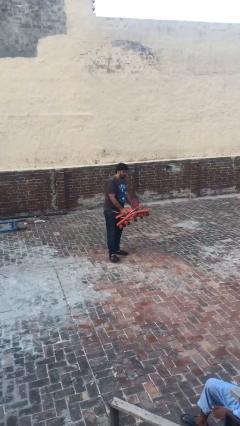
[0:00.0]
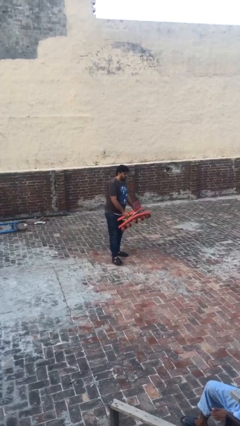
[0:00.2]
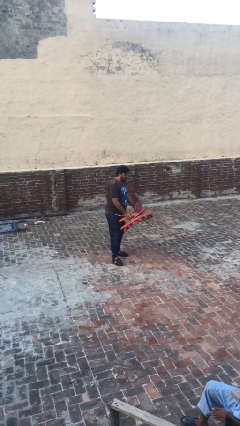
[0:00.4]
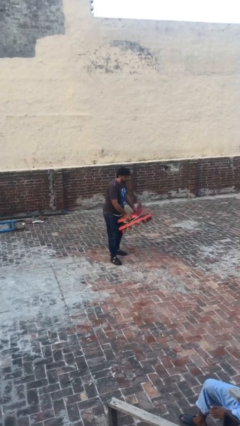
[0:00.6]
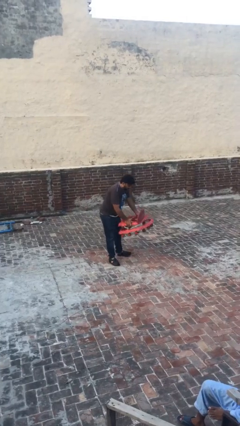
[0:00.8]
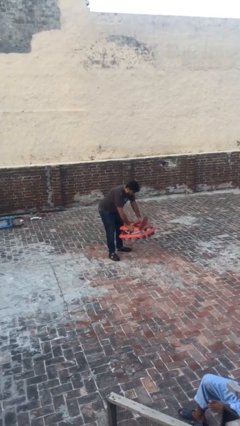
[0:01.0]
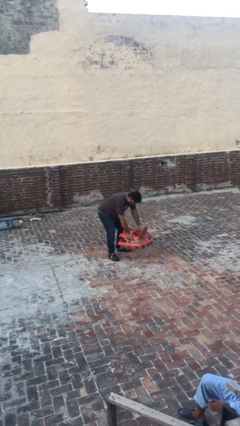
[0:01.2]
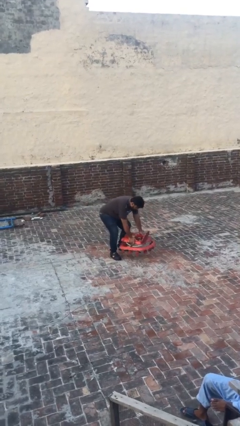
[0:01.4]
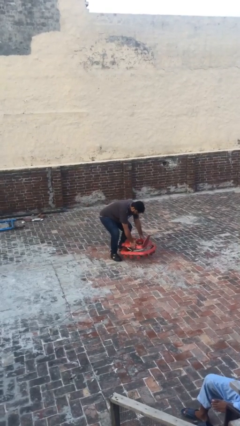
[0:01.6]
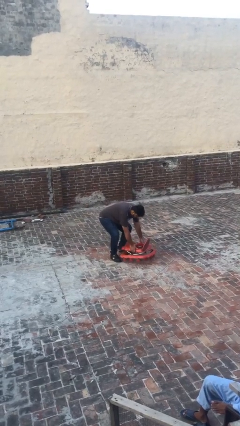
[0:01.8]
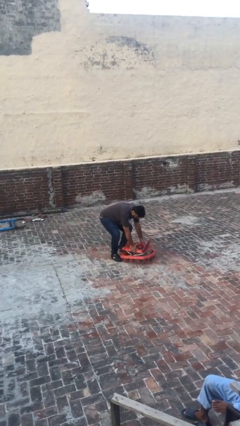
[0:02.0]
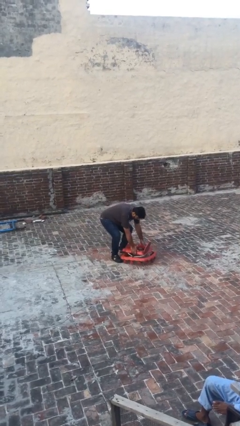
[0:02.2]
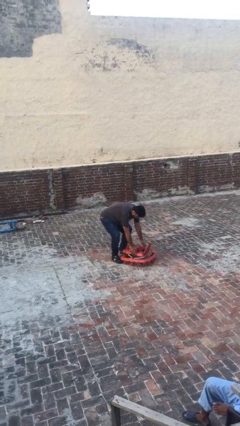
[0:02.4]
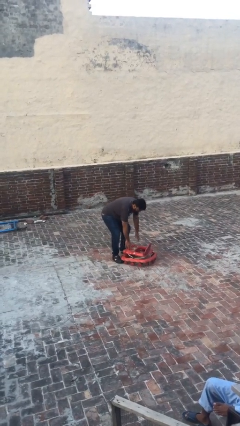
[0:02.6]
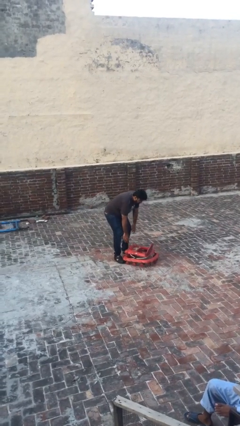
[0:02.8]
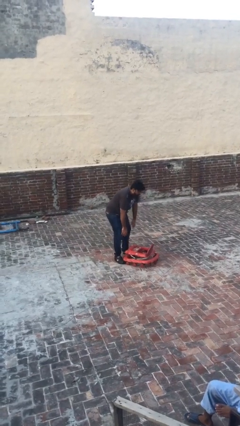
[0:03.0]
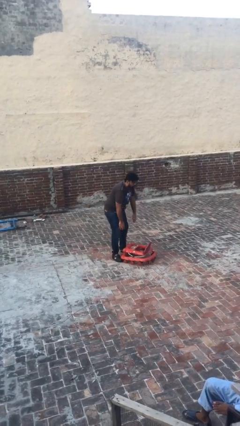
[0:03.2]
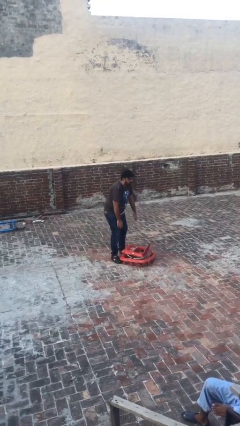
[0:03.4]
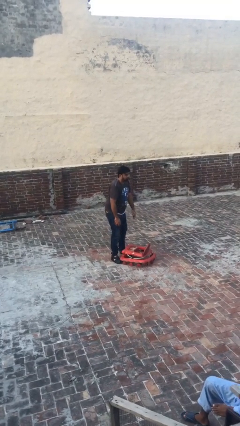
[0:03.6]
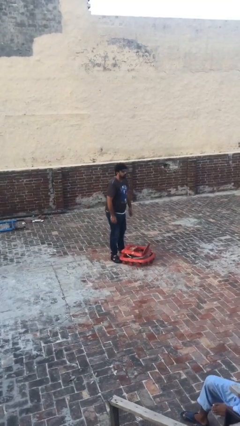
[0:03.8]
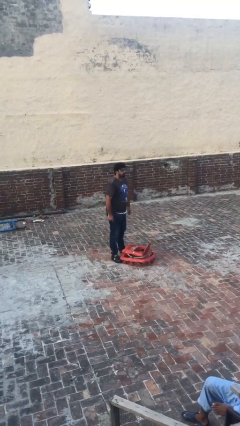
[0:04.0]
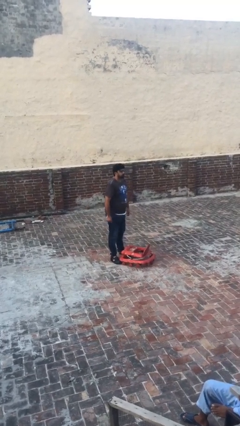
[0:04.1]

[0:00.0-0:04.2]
person puts down object on floor

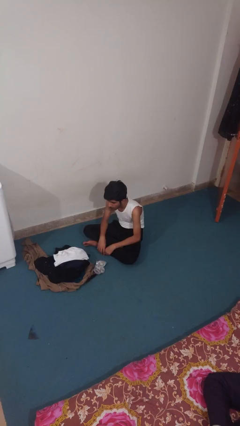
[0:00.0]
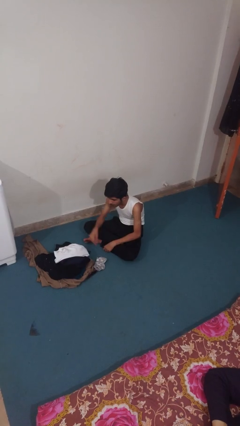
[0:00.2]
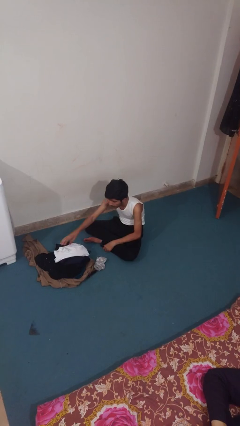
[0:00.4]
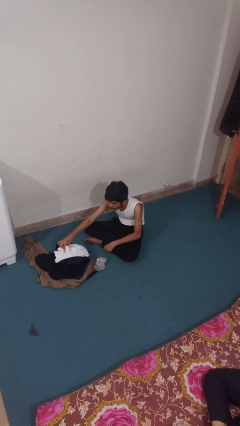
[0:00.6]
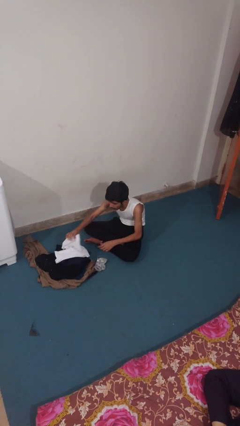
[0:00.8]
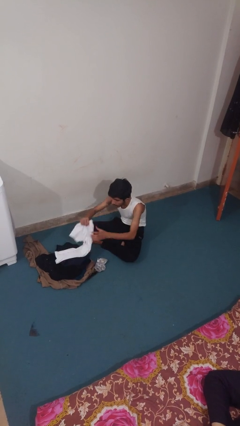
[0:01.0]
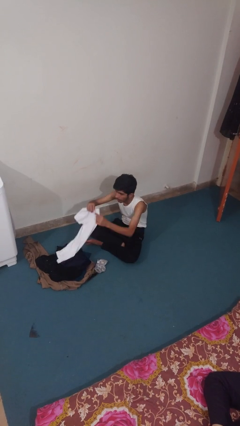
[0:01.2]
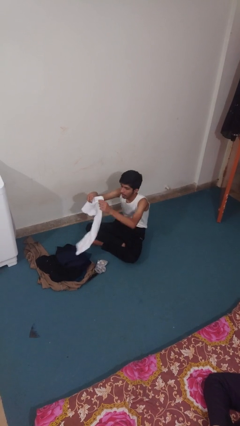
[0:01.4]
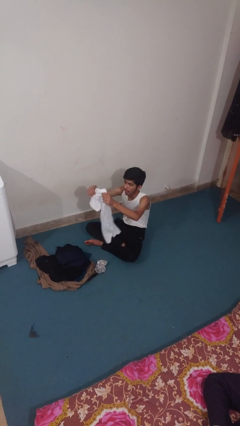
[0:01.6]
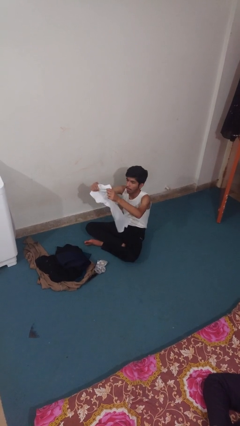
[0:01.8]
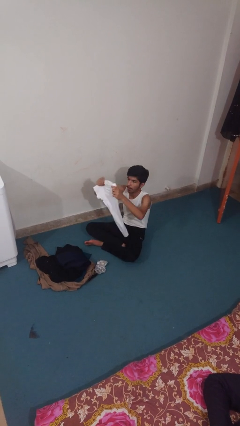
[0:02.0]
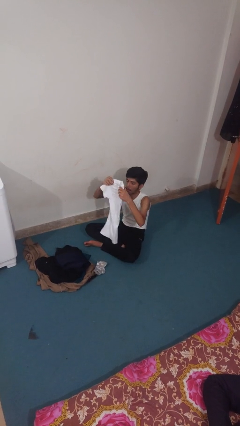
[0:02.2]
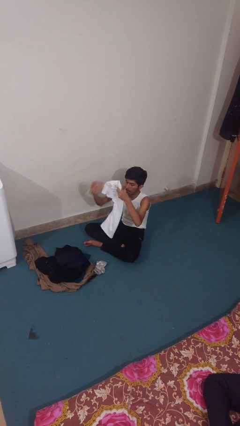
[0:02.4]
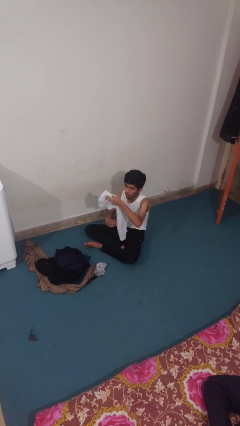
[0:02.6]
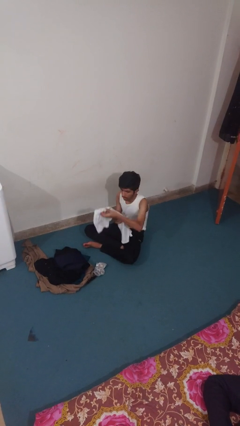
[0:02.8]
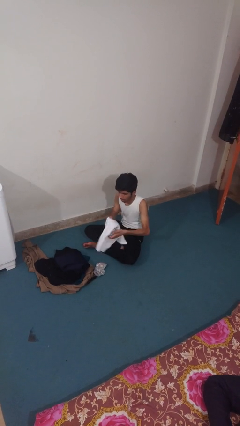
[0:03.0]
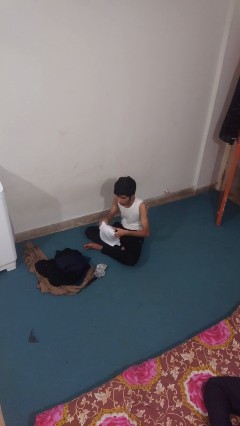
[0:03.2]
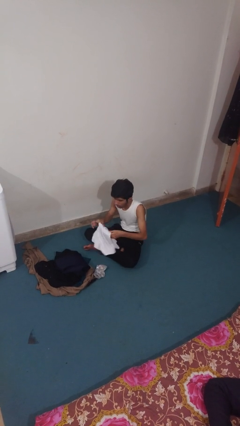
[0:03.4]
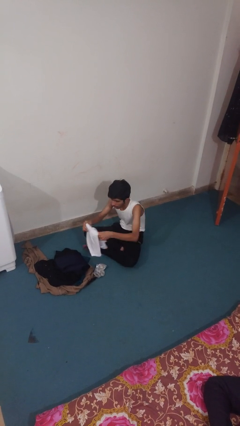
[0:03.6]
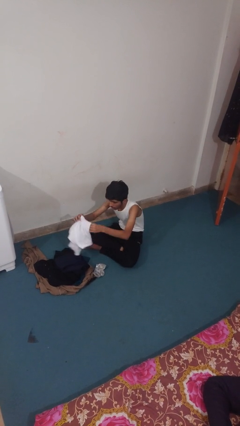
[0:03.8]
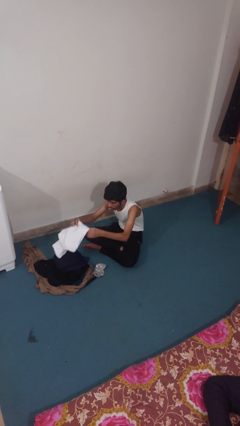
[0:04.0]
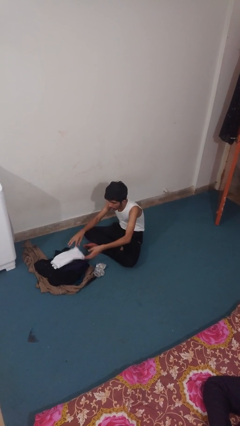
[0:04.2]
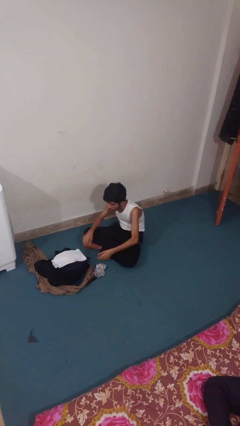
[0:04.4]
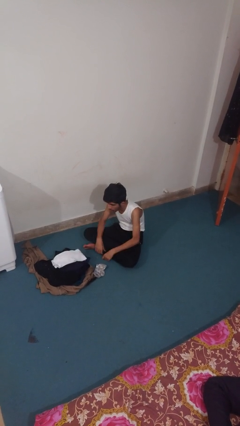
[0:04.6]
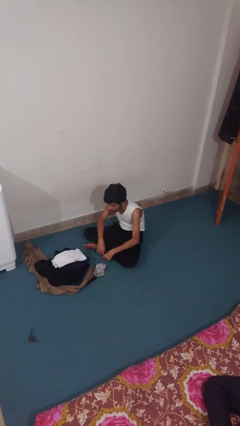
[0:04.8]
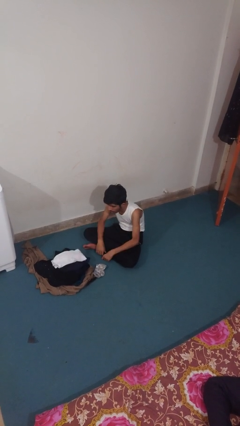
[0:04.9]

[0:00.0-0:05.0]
person folds shirt

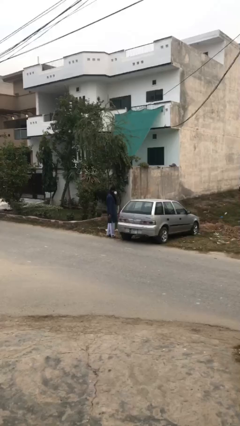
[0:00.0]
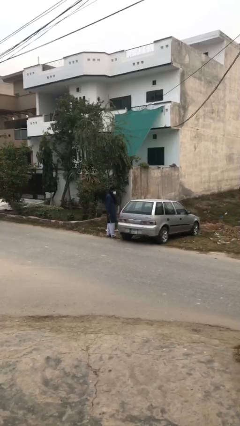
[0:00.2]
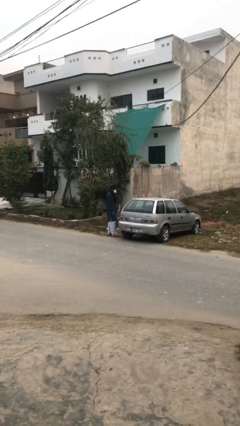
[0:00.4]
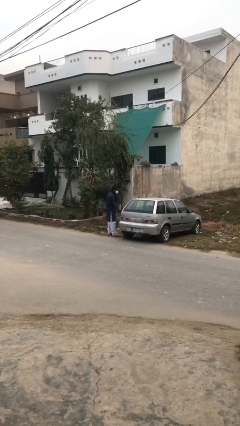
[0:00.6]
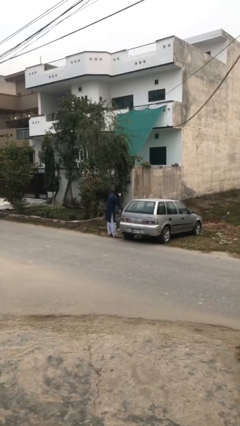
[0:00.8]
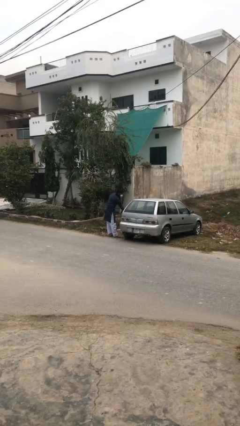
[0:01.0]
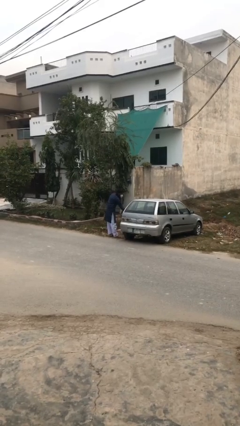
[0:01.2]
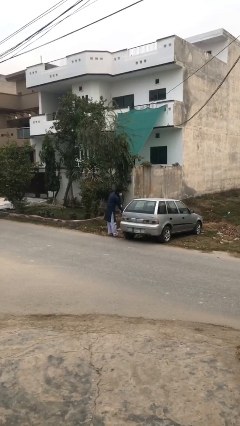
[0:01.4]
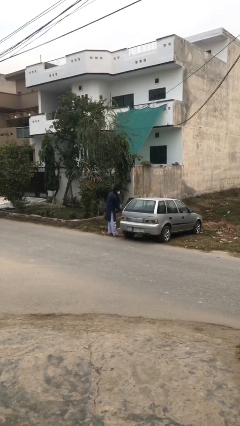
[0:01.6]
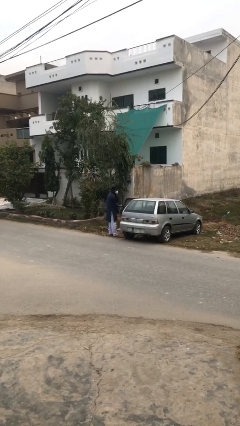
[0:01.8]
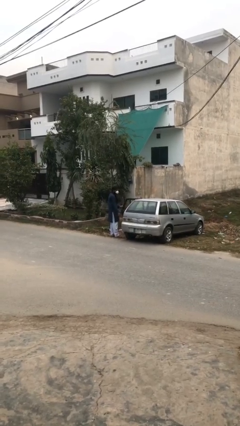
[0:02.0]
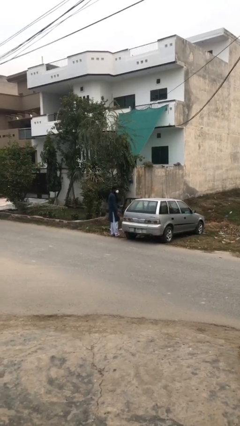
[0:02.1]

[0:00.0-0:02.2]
person opens car door

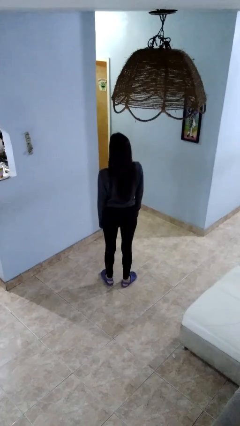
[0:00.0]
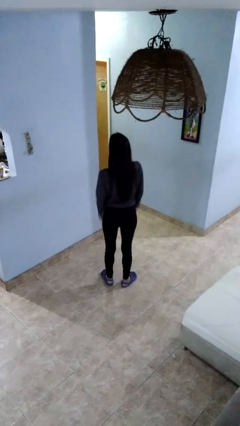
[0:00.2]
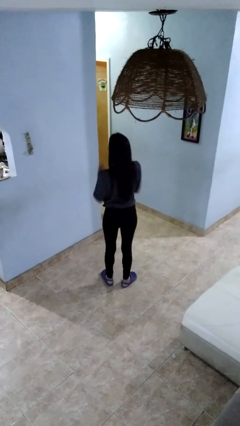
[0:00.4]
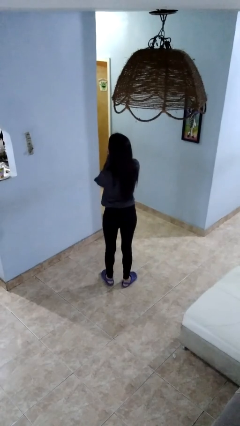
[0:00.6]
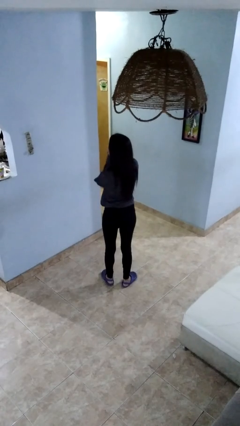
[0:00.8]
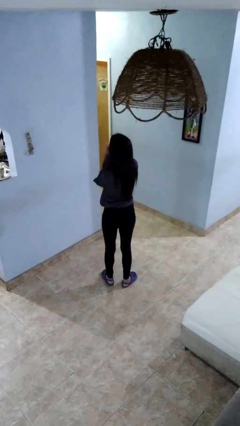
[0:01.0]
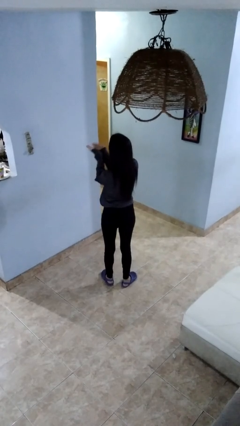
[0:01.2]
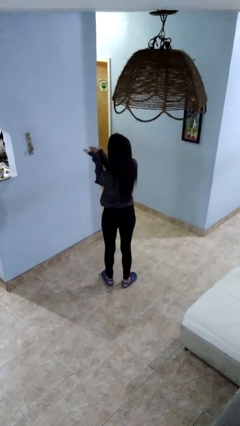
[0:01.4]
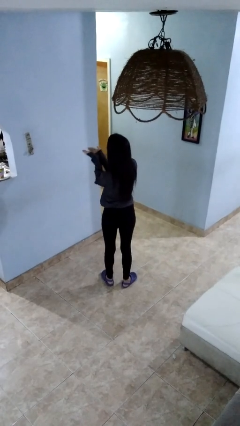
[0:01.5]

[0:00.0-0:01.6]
person gestures blow kiss

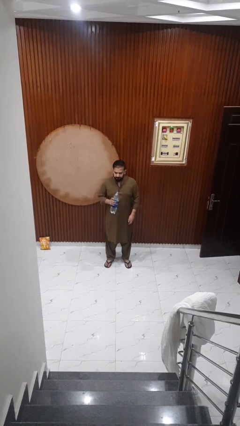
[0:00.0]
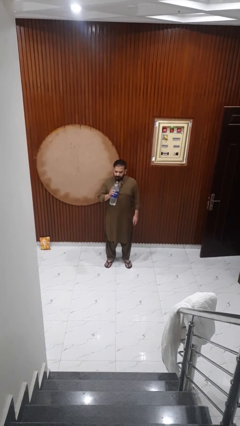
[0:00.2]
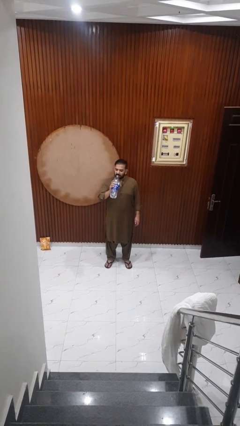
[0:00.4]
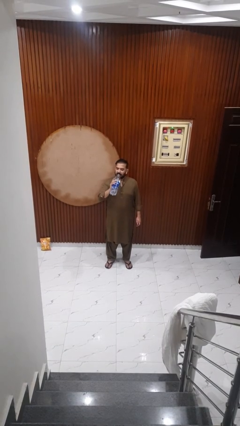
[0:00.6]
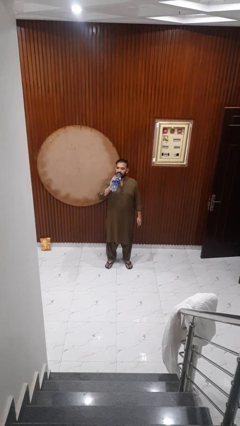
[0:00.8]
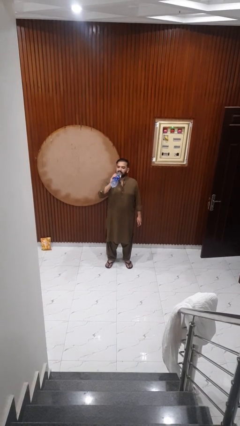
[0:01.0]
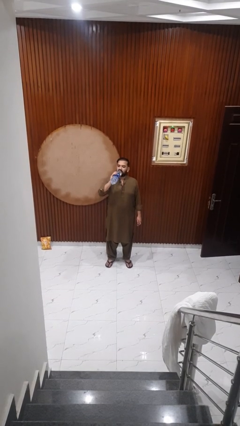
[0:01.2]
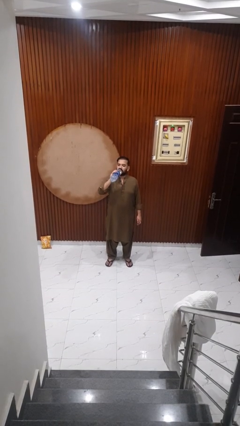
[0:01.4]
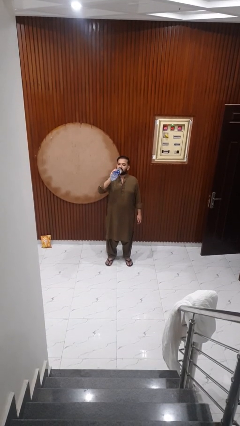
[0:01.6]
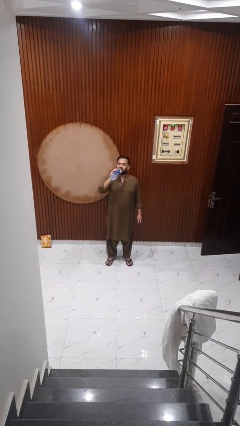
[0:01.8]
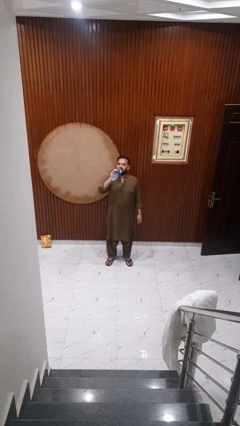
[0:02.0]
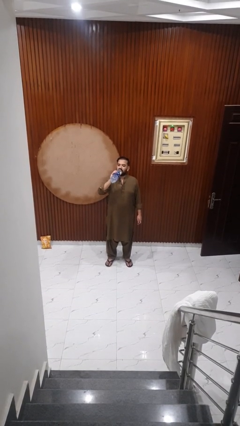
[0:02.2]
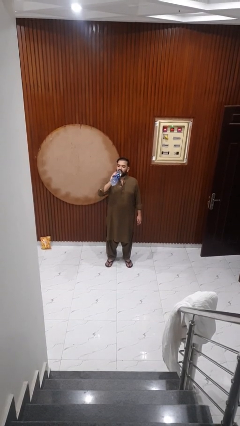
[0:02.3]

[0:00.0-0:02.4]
person drinks from bottle

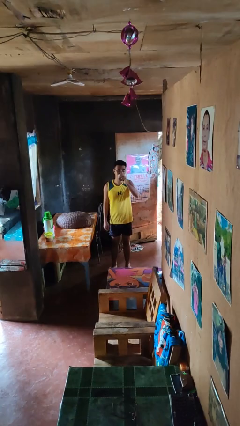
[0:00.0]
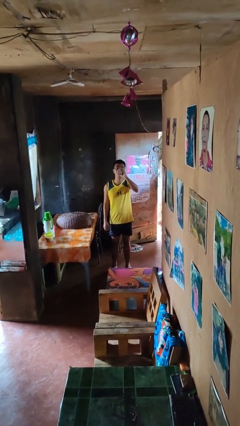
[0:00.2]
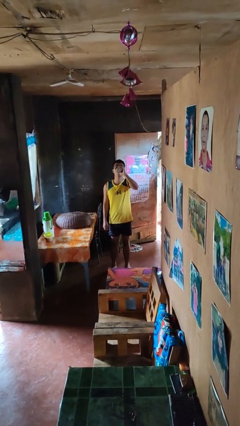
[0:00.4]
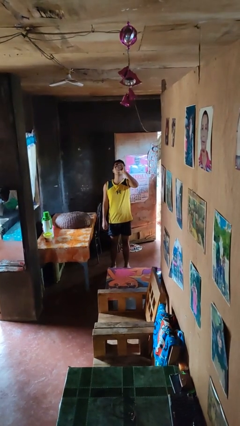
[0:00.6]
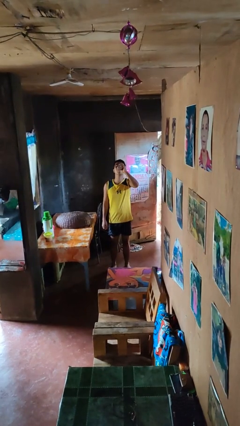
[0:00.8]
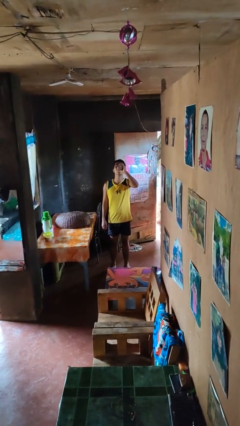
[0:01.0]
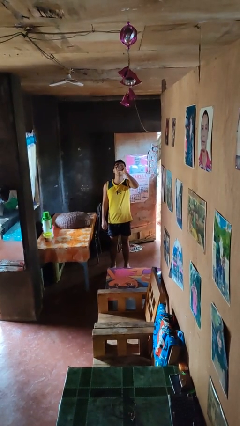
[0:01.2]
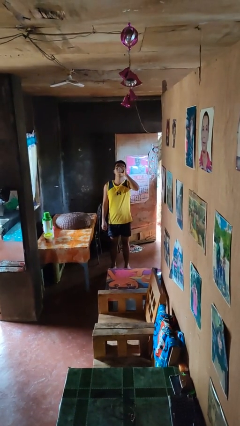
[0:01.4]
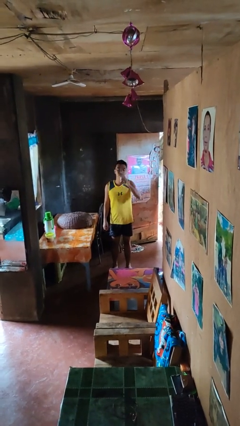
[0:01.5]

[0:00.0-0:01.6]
person drinks from beverage can

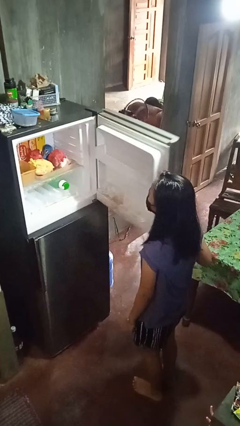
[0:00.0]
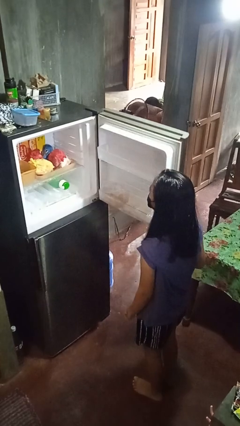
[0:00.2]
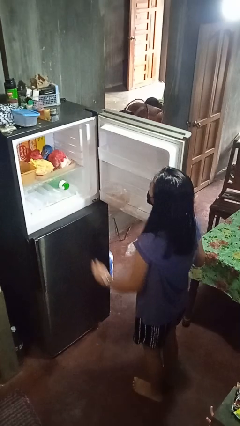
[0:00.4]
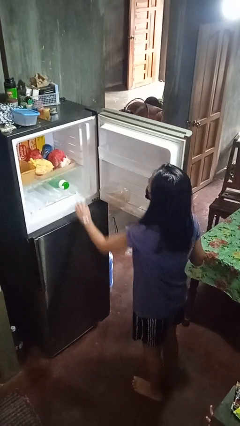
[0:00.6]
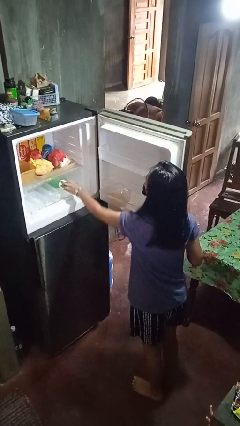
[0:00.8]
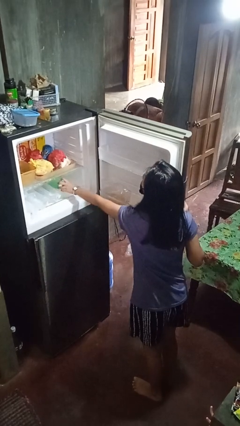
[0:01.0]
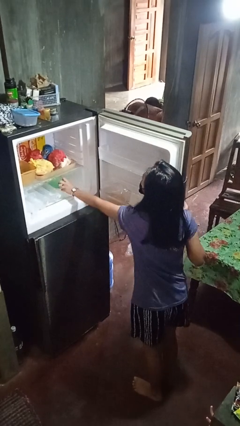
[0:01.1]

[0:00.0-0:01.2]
person takes object from refrigerator
